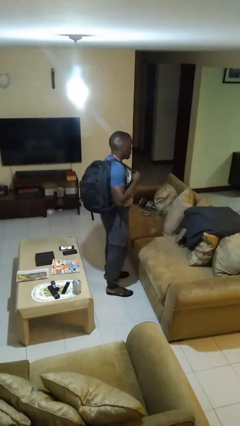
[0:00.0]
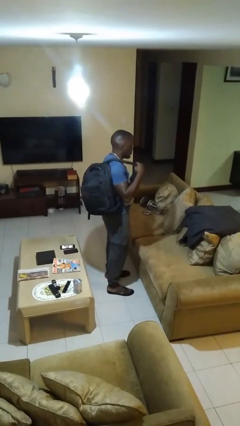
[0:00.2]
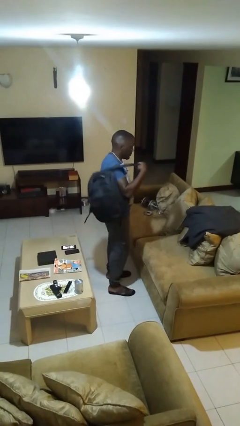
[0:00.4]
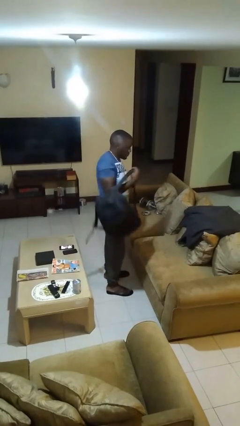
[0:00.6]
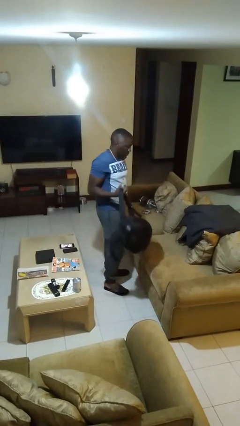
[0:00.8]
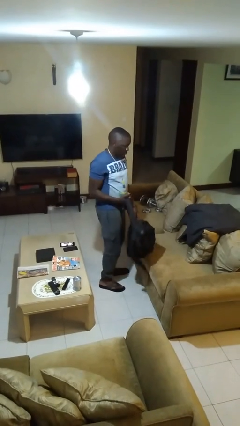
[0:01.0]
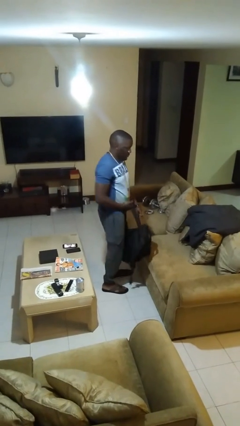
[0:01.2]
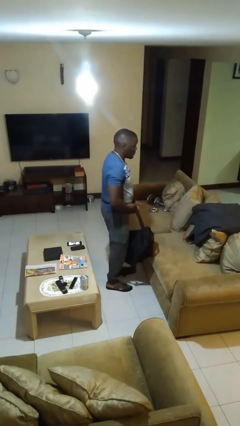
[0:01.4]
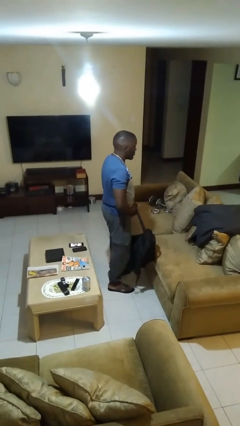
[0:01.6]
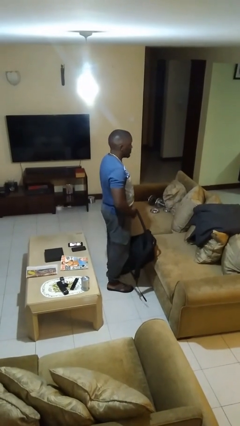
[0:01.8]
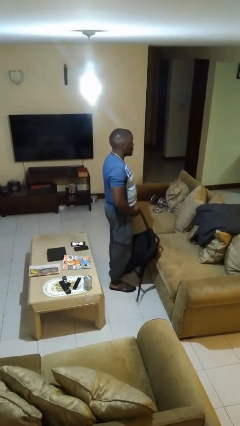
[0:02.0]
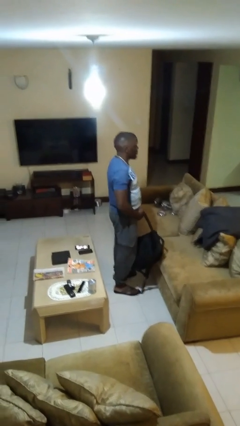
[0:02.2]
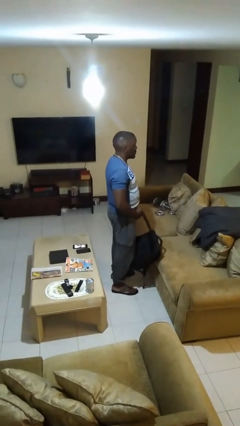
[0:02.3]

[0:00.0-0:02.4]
person takes off backpack

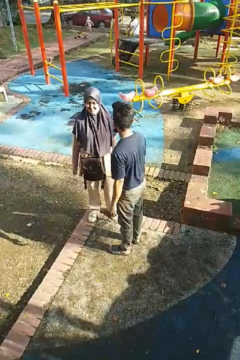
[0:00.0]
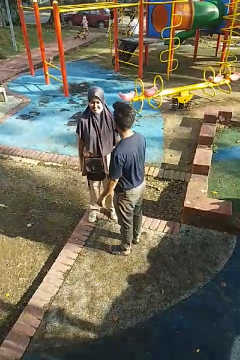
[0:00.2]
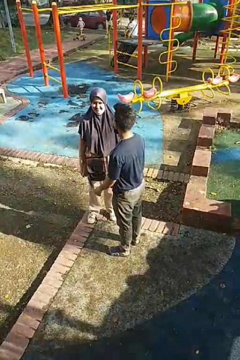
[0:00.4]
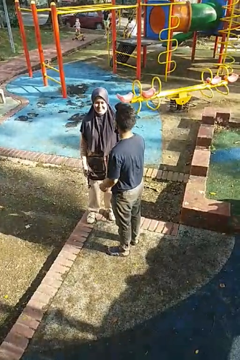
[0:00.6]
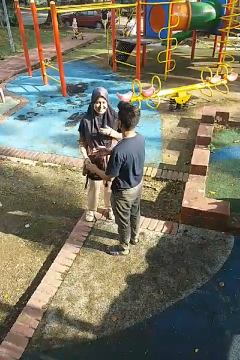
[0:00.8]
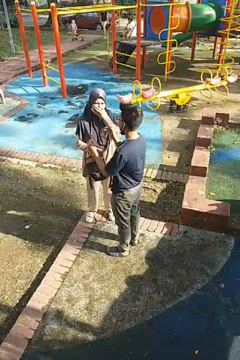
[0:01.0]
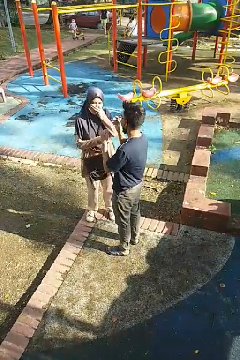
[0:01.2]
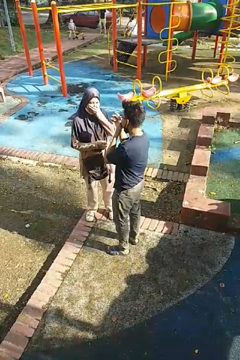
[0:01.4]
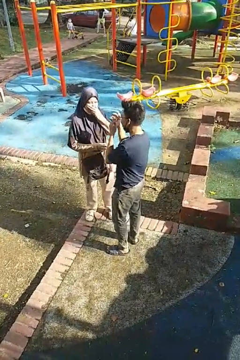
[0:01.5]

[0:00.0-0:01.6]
person laughs with person

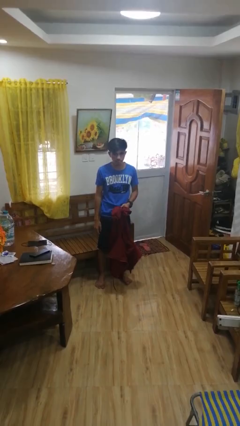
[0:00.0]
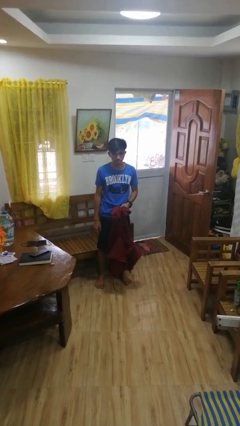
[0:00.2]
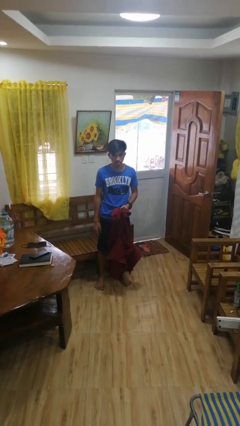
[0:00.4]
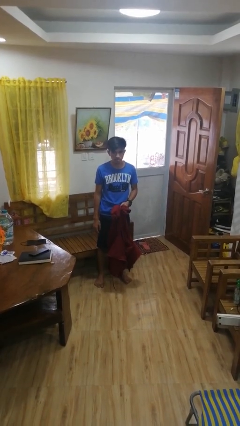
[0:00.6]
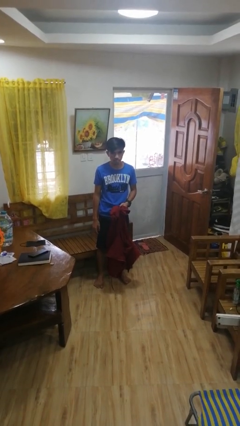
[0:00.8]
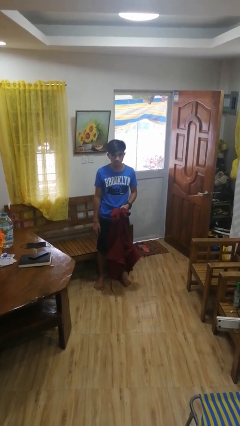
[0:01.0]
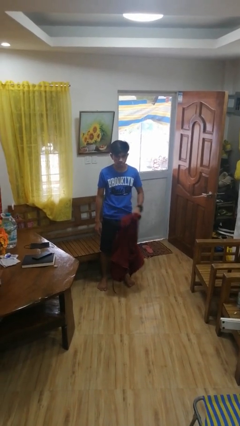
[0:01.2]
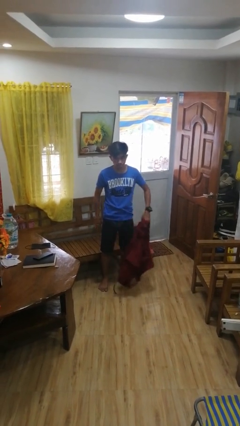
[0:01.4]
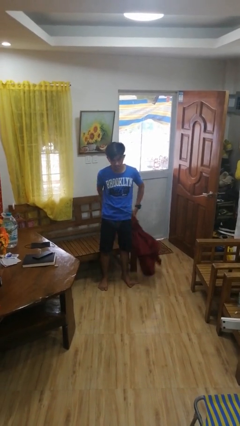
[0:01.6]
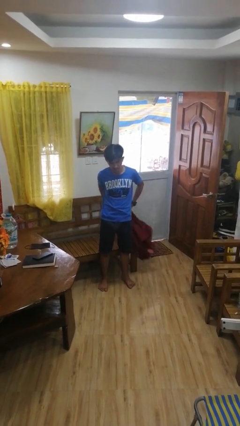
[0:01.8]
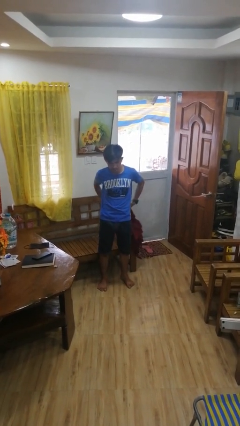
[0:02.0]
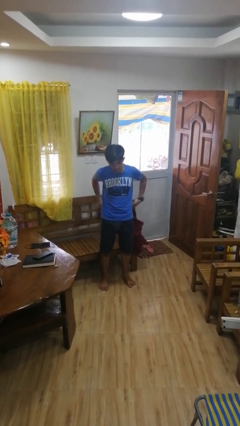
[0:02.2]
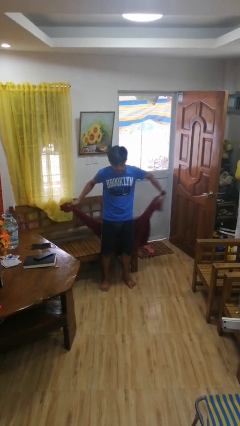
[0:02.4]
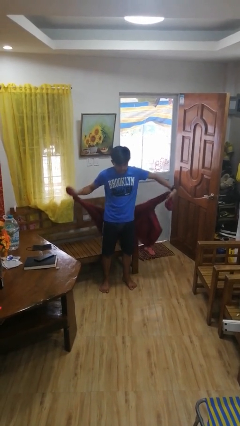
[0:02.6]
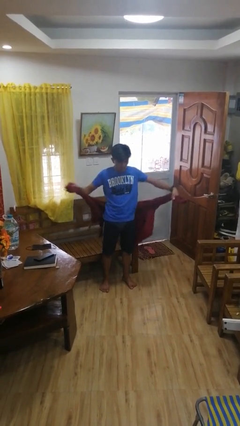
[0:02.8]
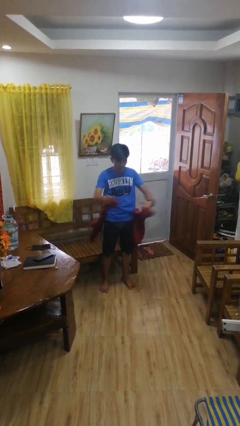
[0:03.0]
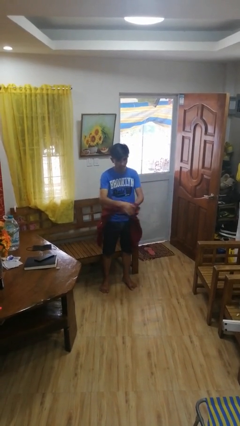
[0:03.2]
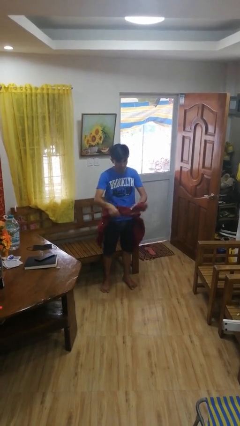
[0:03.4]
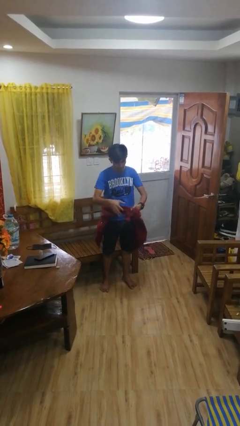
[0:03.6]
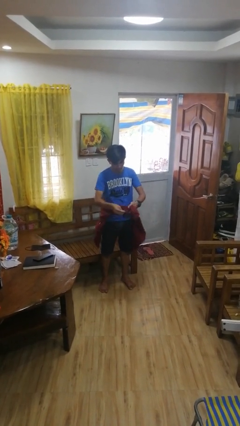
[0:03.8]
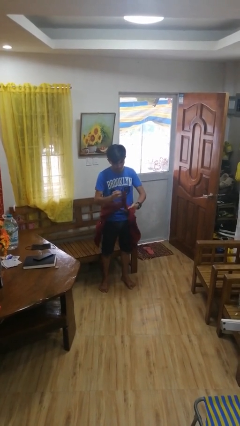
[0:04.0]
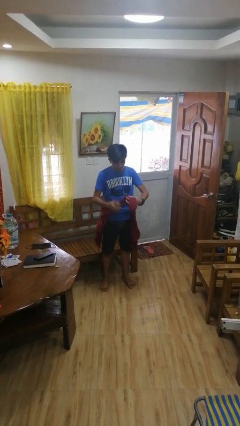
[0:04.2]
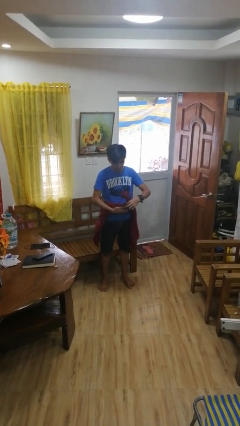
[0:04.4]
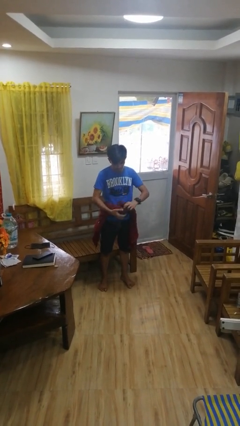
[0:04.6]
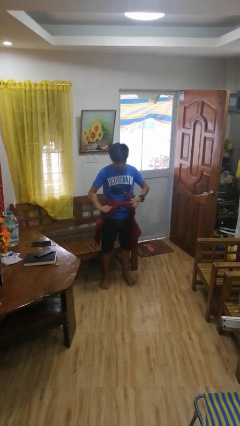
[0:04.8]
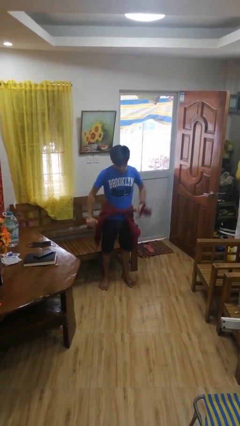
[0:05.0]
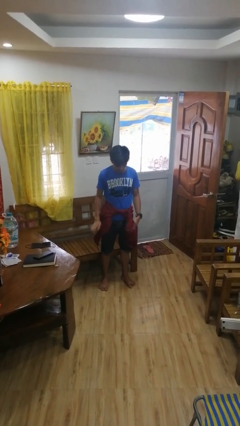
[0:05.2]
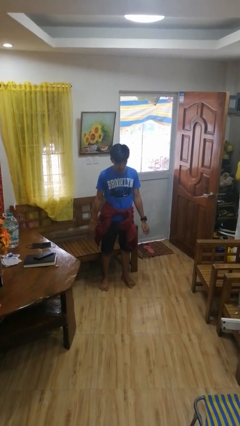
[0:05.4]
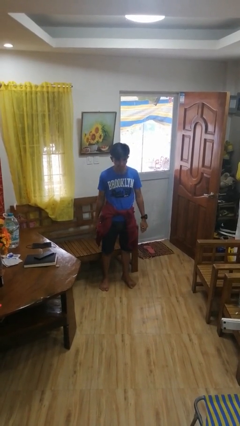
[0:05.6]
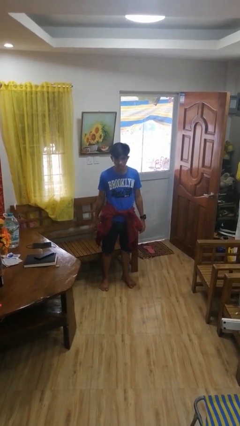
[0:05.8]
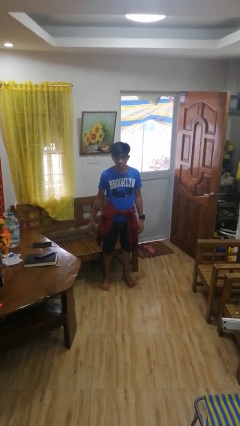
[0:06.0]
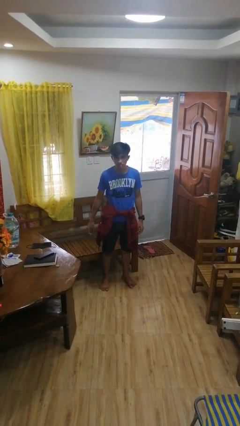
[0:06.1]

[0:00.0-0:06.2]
person ties jacket around waist

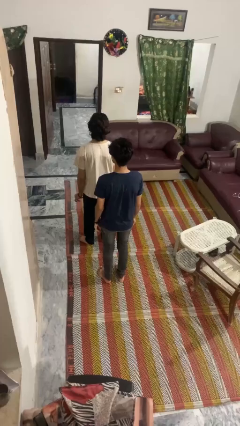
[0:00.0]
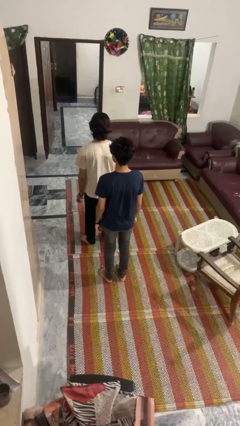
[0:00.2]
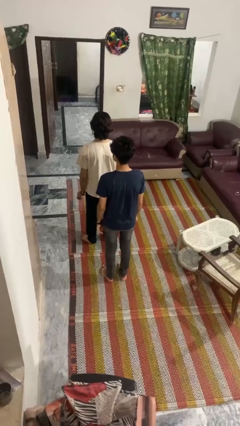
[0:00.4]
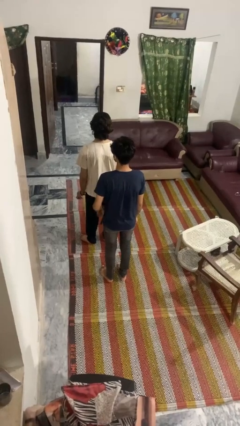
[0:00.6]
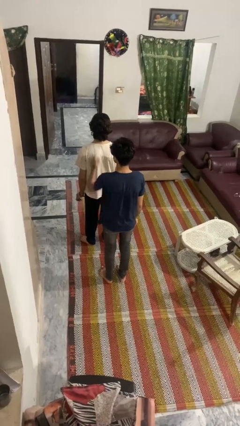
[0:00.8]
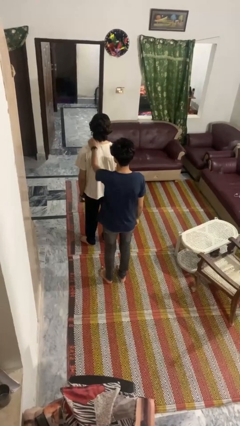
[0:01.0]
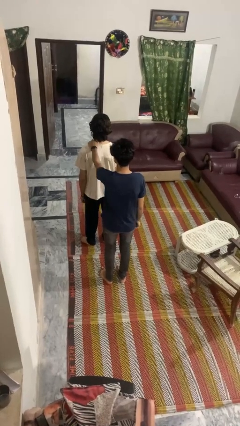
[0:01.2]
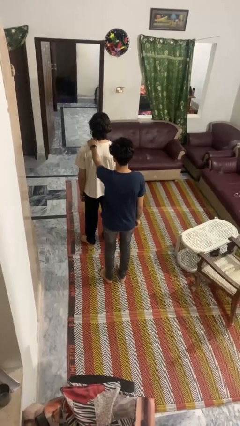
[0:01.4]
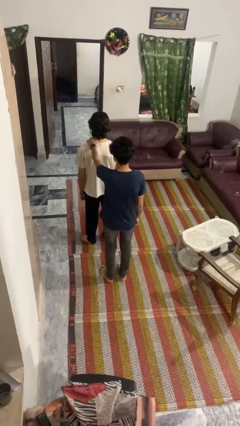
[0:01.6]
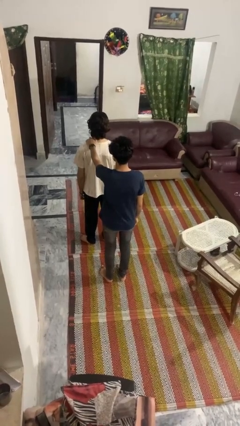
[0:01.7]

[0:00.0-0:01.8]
person grabs person by shoulder

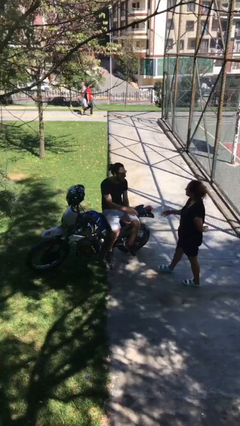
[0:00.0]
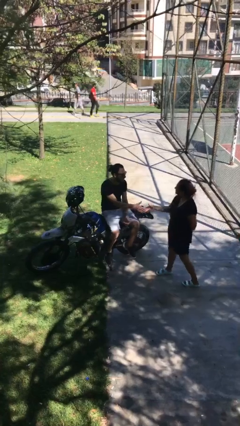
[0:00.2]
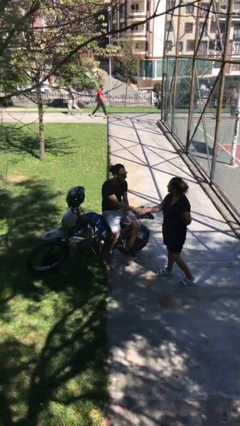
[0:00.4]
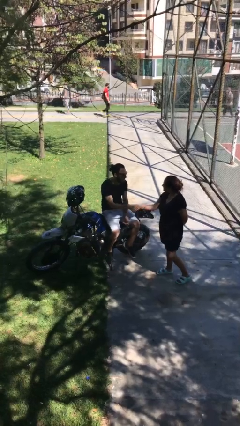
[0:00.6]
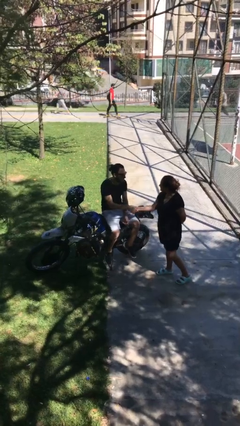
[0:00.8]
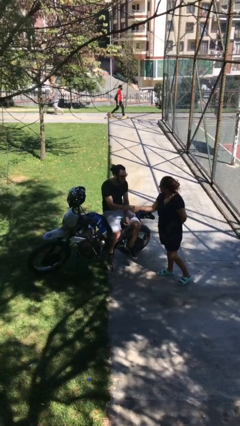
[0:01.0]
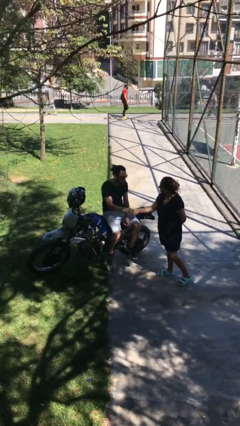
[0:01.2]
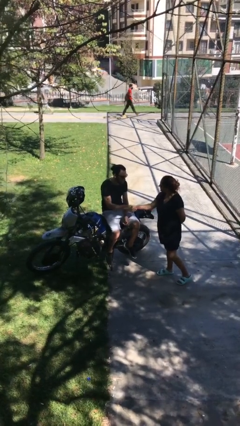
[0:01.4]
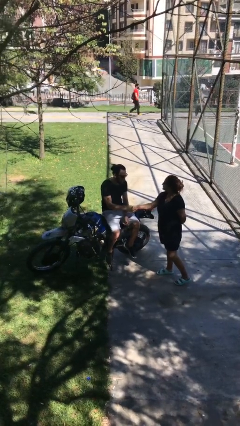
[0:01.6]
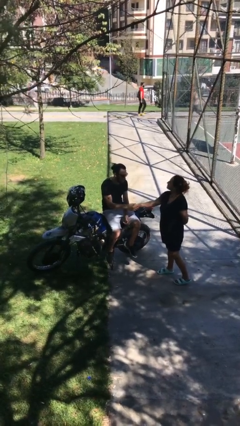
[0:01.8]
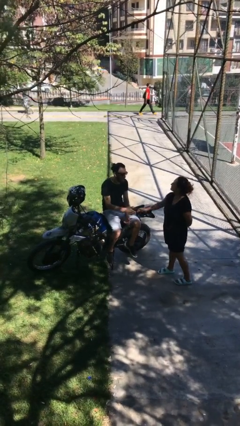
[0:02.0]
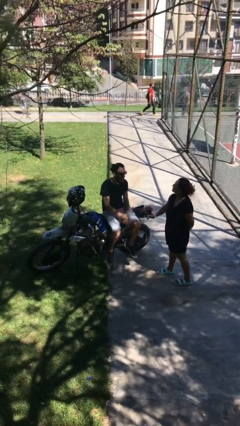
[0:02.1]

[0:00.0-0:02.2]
person shakes hand

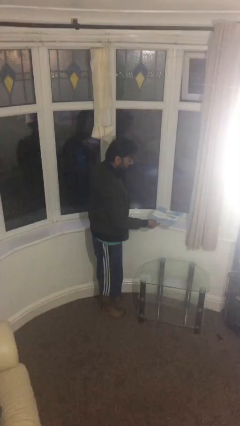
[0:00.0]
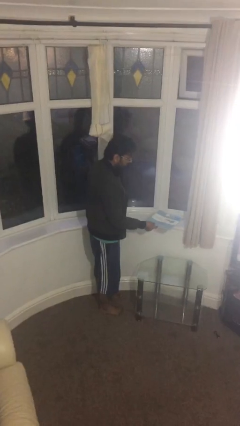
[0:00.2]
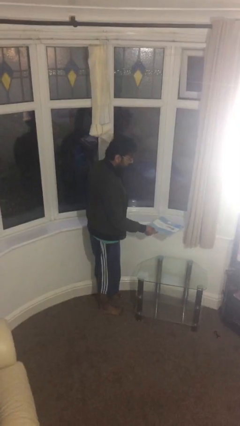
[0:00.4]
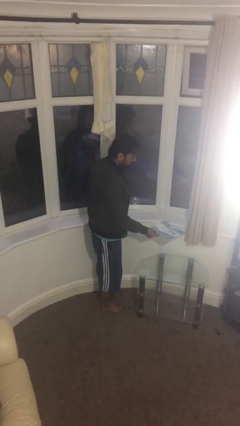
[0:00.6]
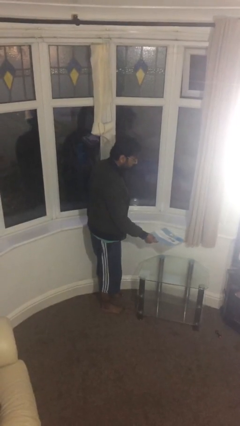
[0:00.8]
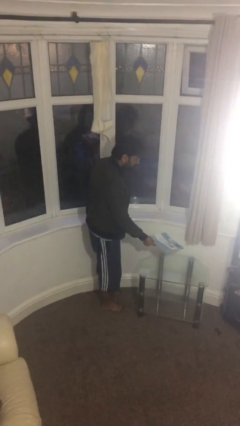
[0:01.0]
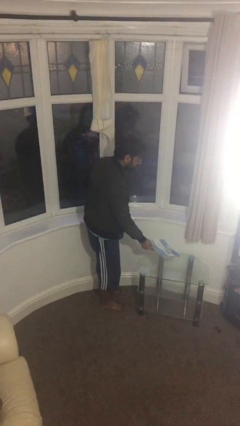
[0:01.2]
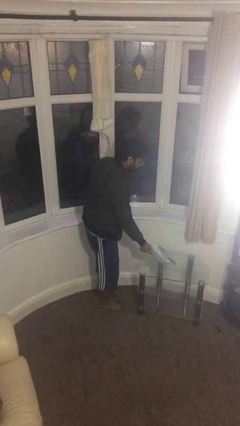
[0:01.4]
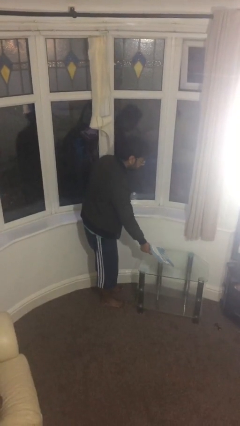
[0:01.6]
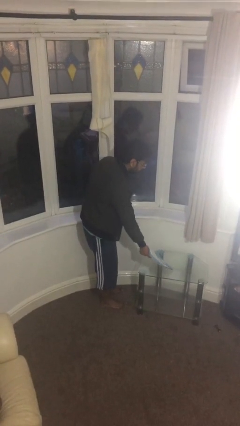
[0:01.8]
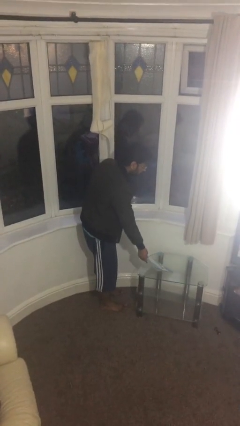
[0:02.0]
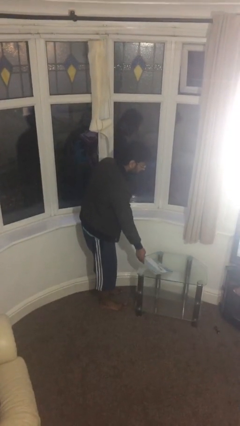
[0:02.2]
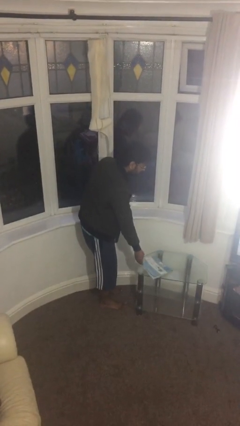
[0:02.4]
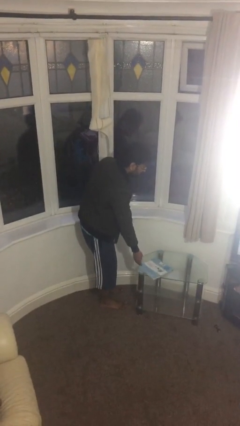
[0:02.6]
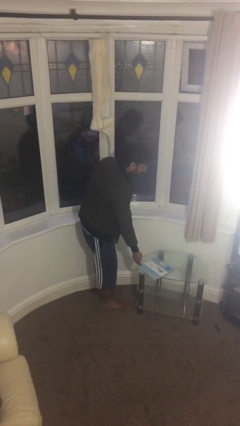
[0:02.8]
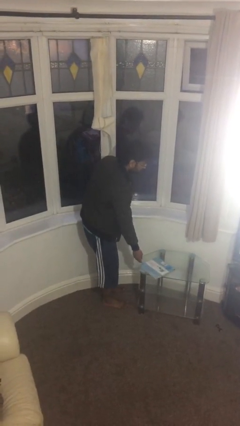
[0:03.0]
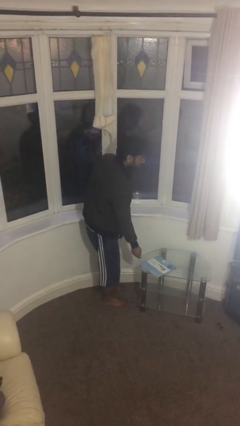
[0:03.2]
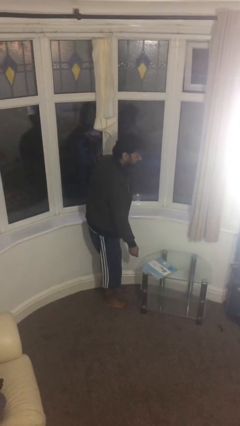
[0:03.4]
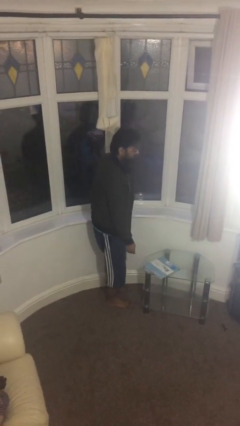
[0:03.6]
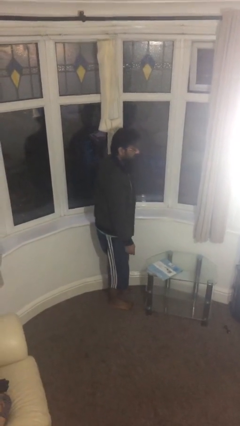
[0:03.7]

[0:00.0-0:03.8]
person puts down object on table
